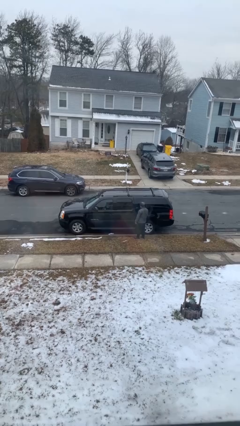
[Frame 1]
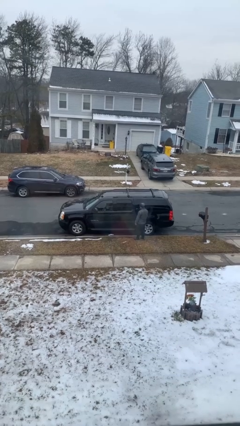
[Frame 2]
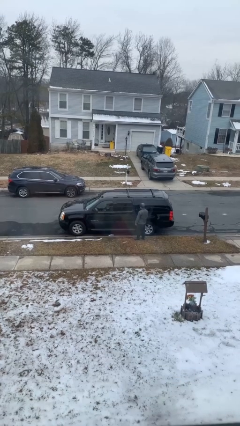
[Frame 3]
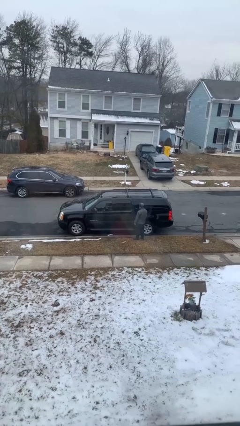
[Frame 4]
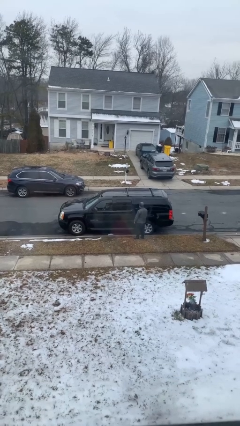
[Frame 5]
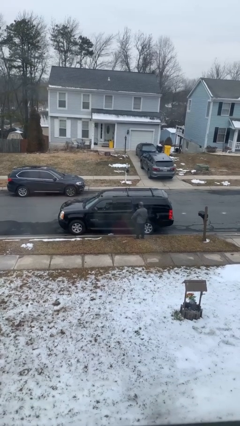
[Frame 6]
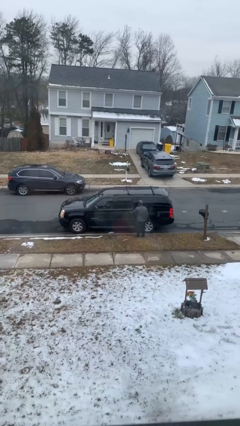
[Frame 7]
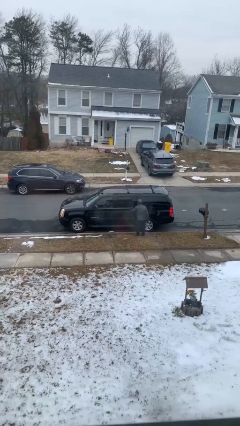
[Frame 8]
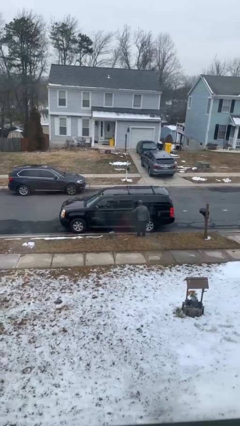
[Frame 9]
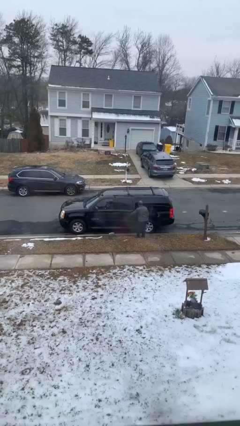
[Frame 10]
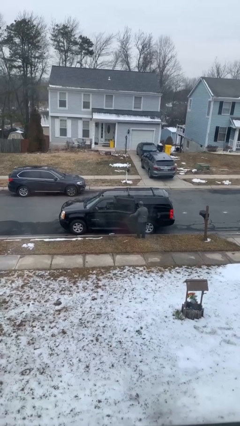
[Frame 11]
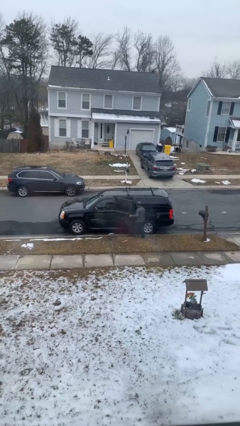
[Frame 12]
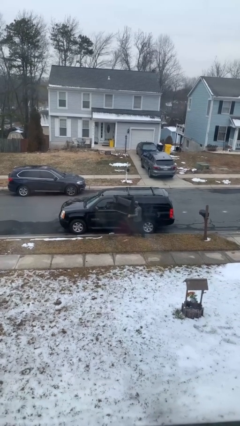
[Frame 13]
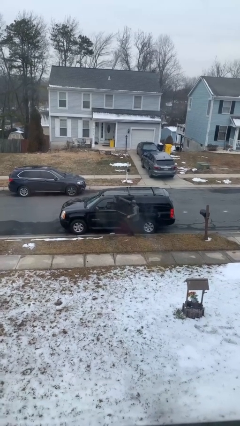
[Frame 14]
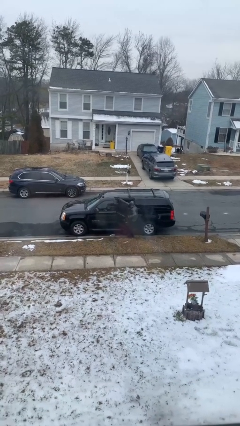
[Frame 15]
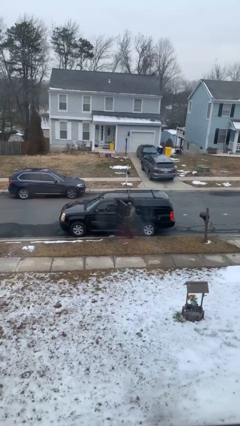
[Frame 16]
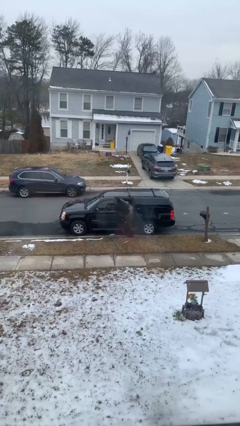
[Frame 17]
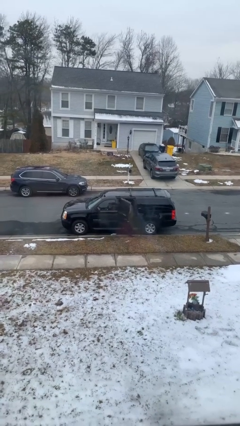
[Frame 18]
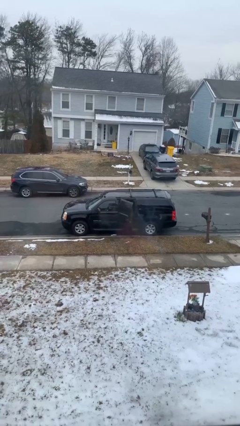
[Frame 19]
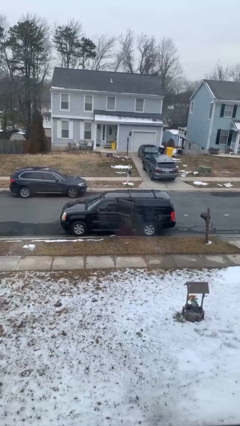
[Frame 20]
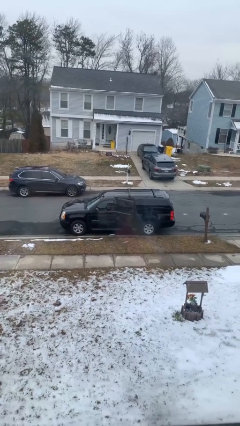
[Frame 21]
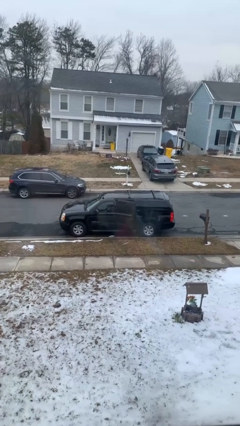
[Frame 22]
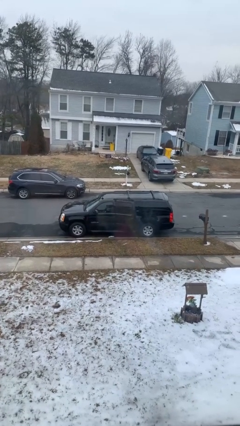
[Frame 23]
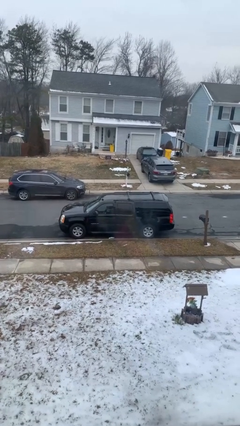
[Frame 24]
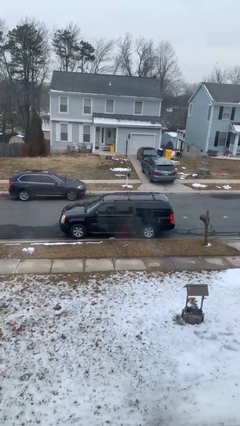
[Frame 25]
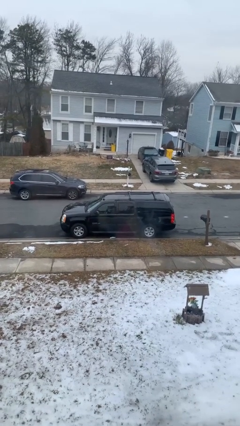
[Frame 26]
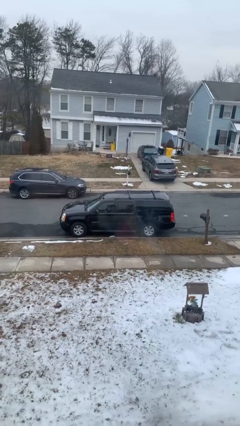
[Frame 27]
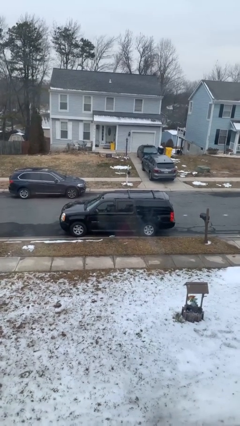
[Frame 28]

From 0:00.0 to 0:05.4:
car picks up person

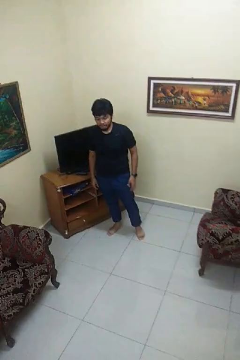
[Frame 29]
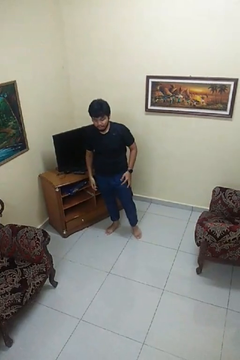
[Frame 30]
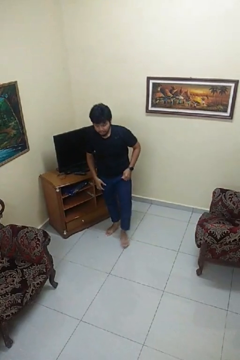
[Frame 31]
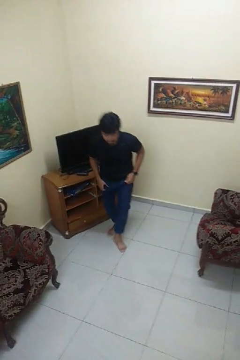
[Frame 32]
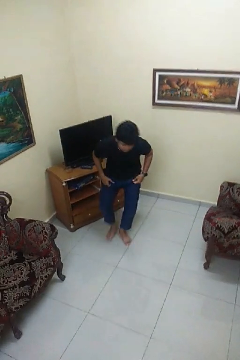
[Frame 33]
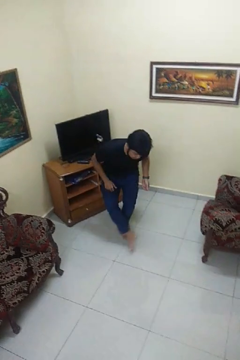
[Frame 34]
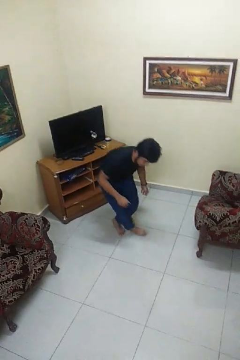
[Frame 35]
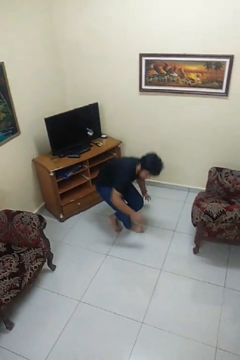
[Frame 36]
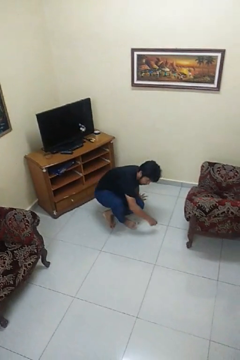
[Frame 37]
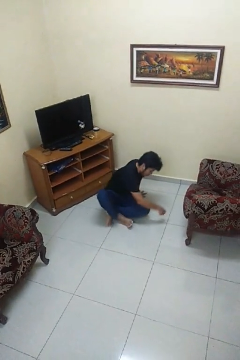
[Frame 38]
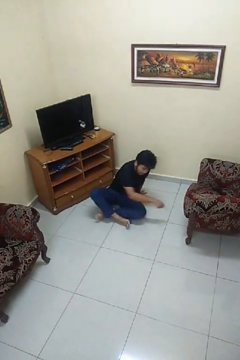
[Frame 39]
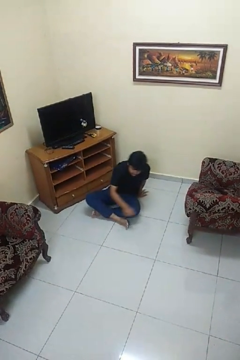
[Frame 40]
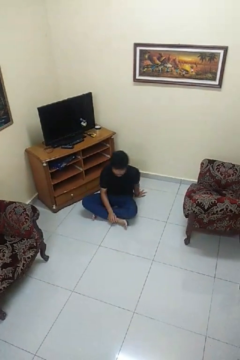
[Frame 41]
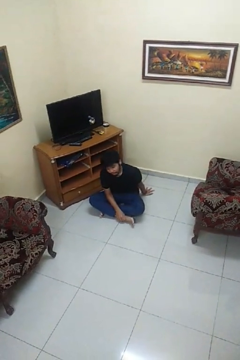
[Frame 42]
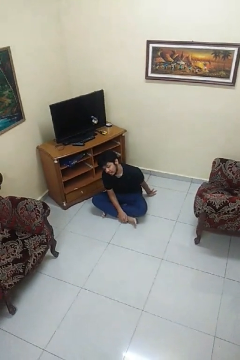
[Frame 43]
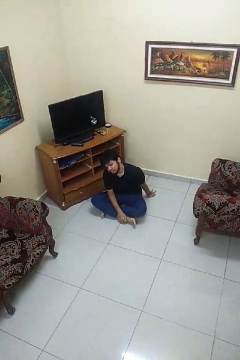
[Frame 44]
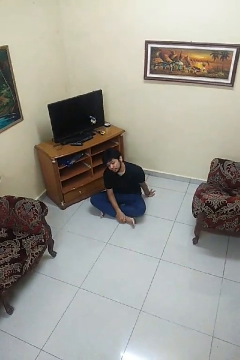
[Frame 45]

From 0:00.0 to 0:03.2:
person sits crisscross

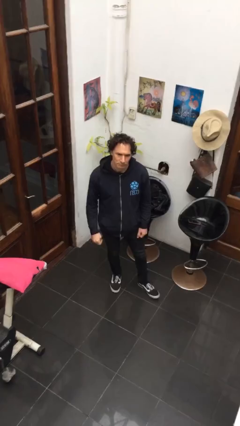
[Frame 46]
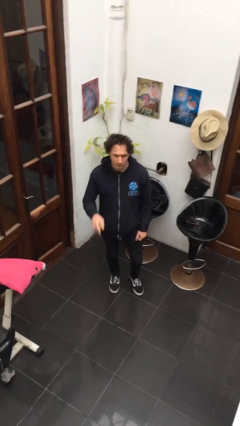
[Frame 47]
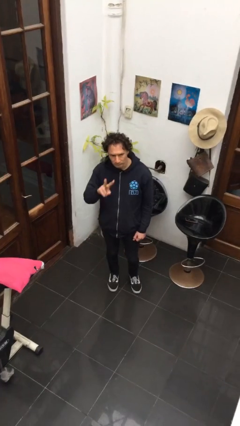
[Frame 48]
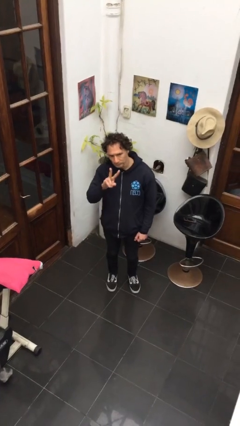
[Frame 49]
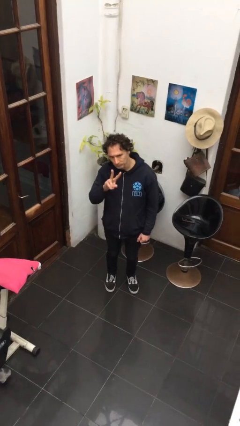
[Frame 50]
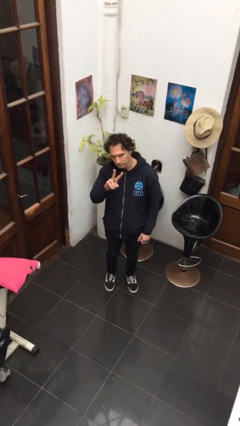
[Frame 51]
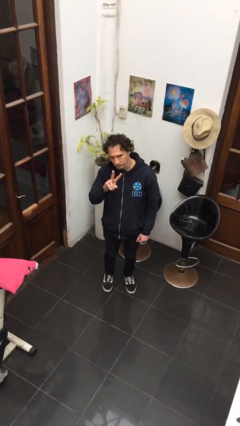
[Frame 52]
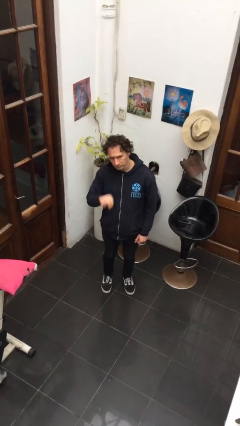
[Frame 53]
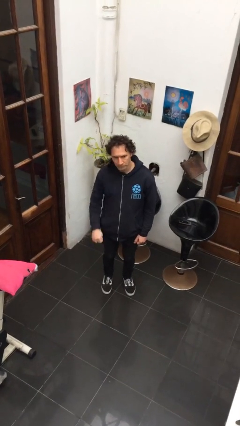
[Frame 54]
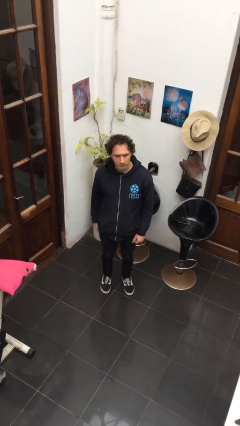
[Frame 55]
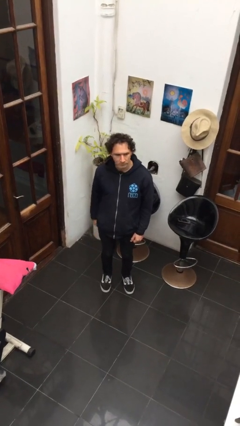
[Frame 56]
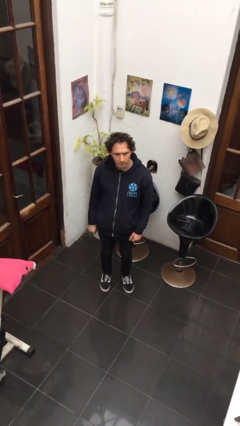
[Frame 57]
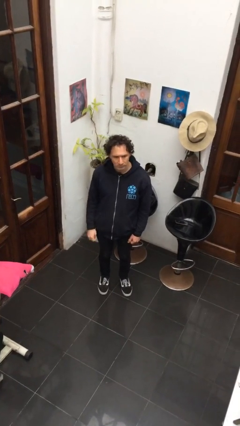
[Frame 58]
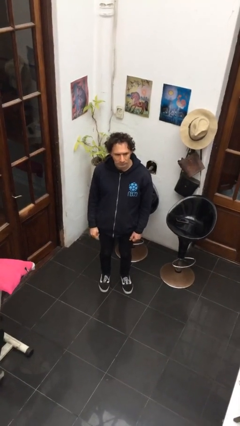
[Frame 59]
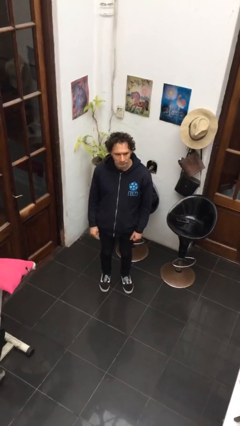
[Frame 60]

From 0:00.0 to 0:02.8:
person gestures peace

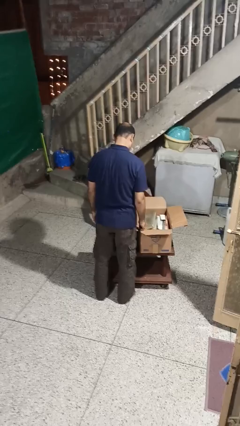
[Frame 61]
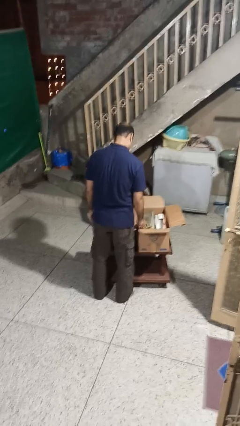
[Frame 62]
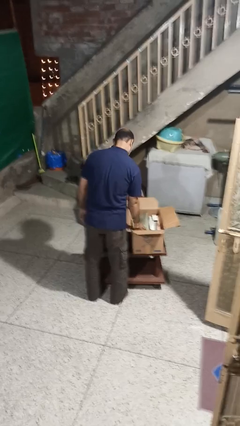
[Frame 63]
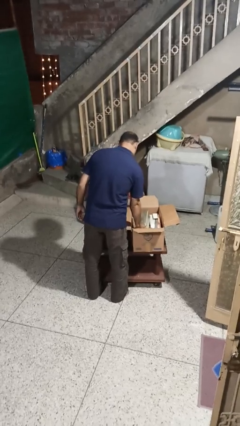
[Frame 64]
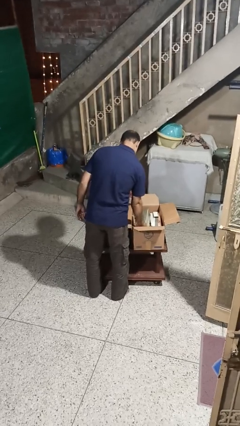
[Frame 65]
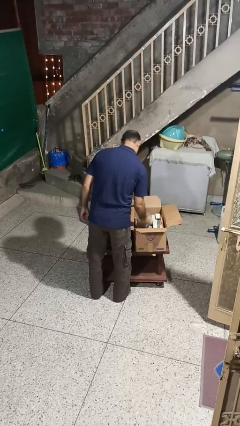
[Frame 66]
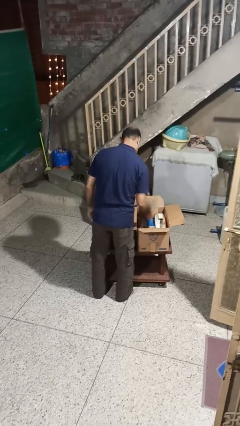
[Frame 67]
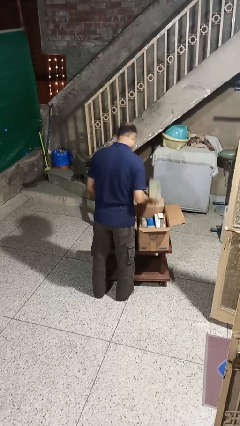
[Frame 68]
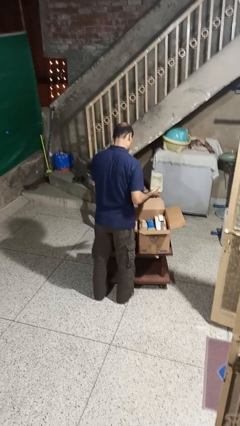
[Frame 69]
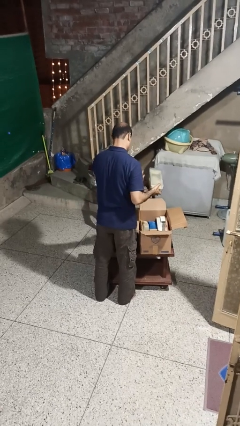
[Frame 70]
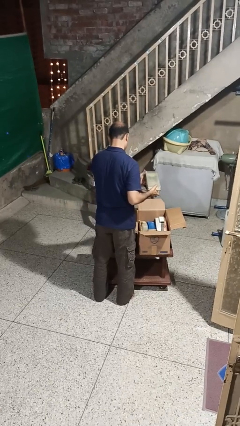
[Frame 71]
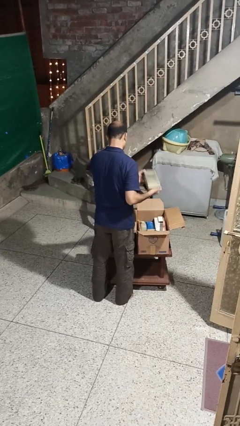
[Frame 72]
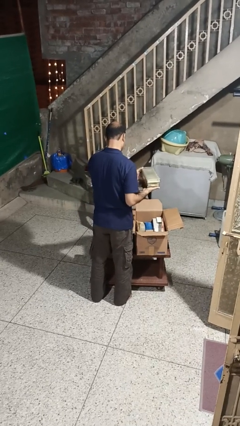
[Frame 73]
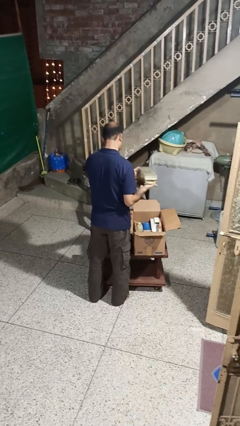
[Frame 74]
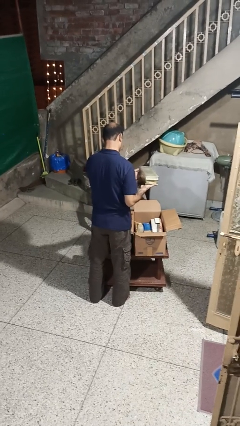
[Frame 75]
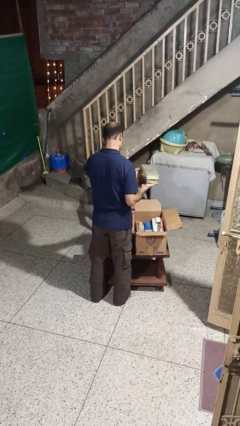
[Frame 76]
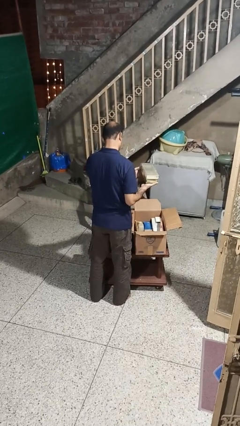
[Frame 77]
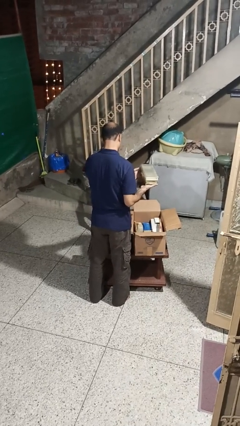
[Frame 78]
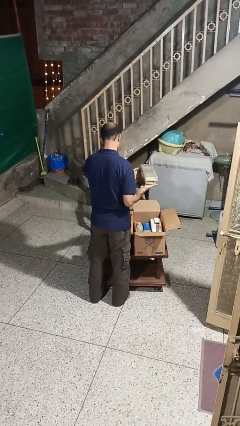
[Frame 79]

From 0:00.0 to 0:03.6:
person takes object from box

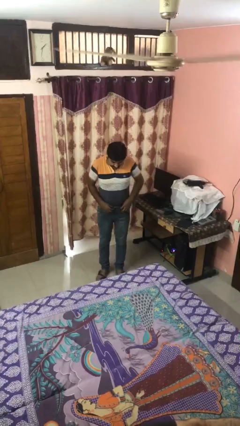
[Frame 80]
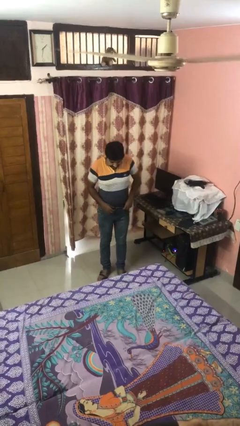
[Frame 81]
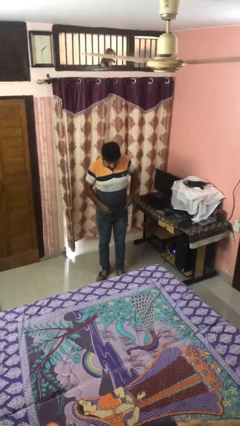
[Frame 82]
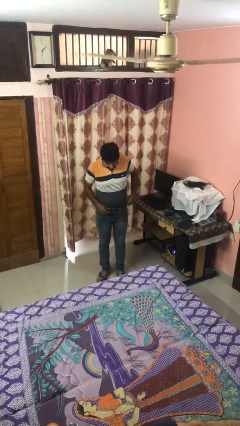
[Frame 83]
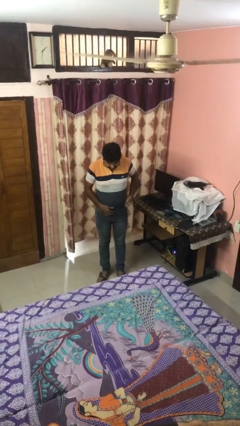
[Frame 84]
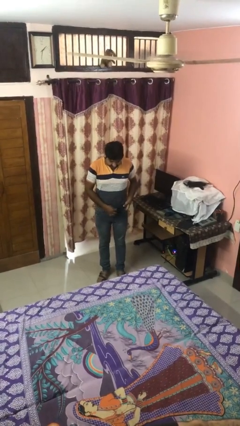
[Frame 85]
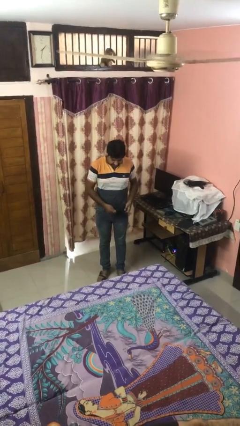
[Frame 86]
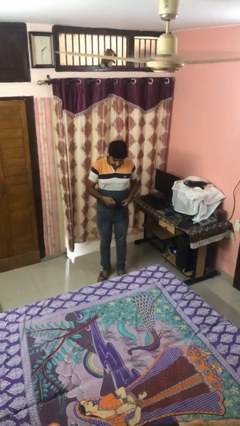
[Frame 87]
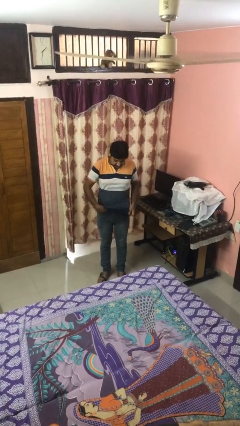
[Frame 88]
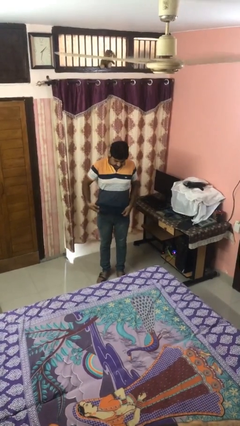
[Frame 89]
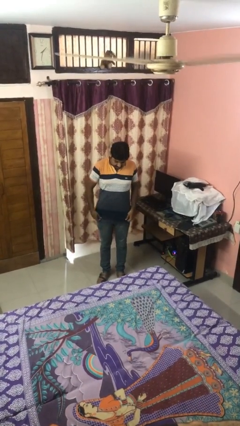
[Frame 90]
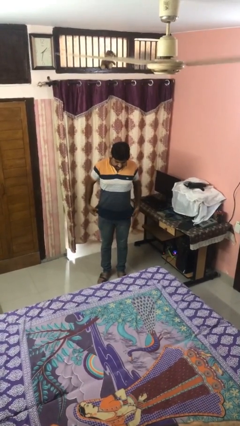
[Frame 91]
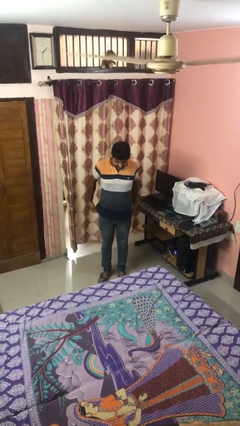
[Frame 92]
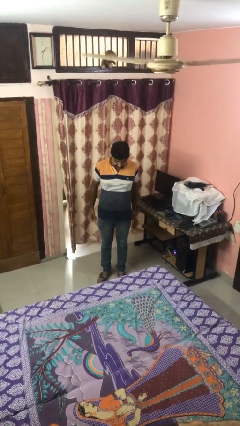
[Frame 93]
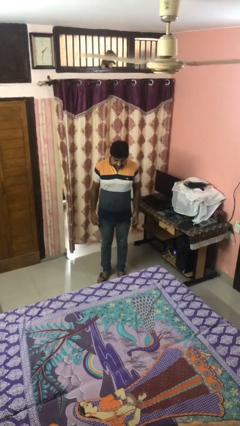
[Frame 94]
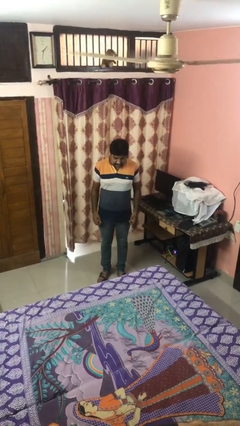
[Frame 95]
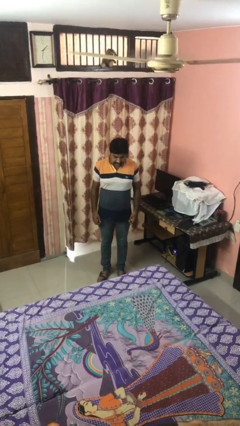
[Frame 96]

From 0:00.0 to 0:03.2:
person untucks shirt
